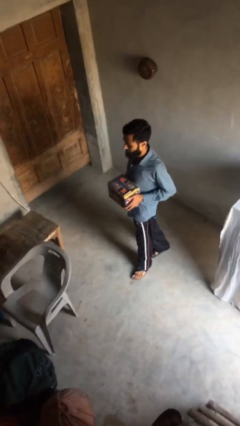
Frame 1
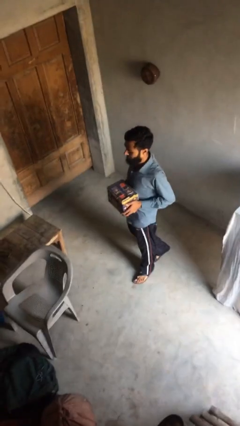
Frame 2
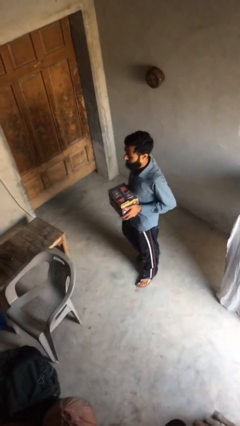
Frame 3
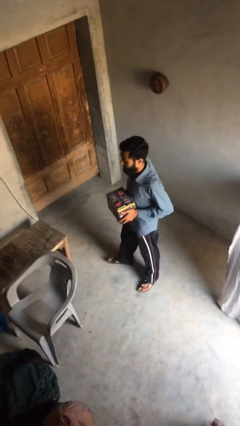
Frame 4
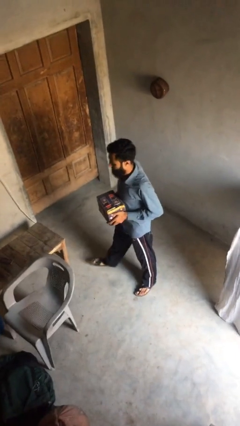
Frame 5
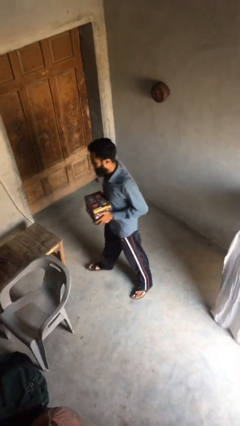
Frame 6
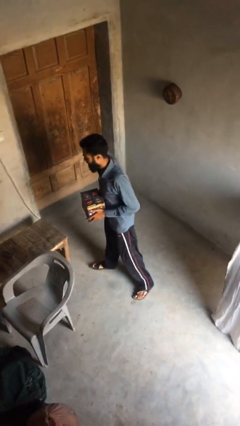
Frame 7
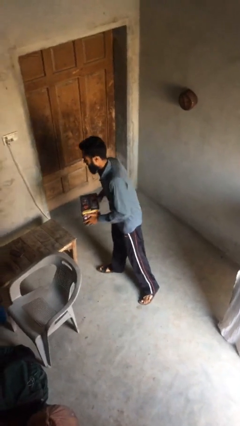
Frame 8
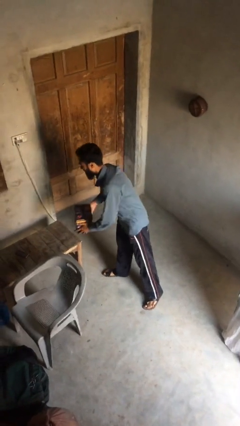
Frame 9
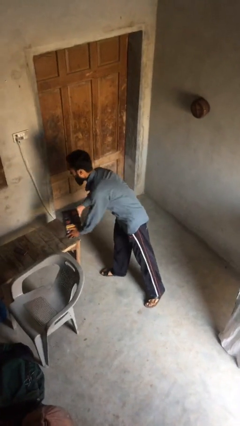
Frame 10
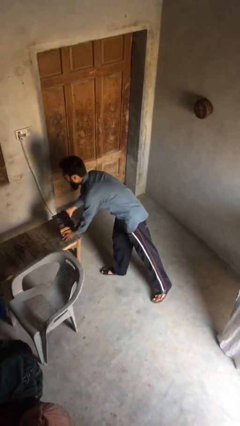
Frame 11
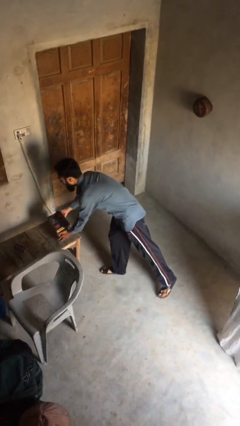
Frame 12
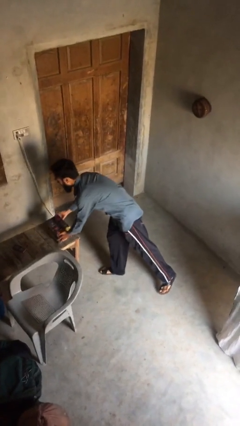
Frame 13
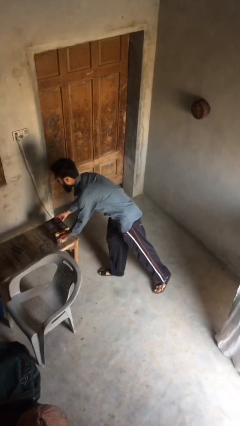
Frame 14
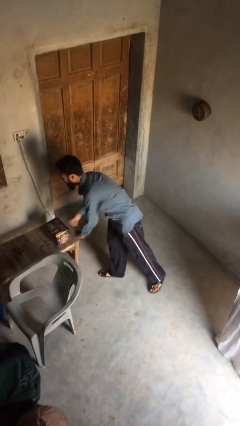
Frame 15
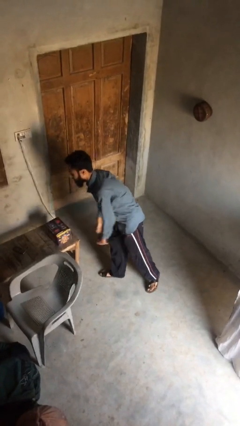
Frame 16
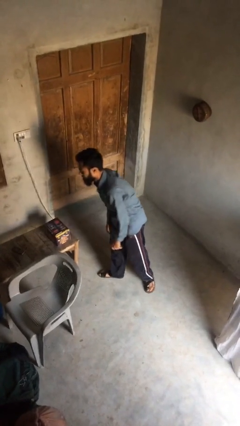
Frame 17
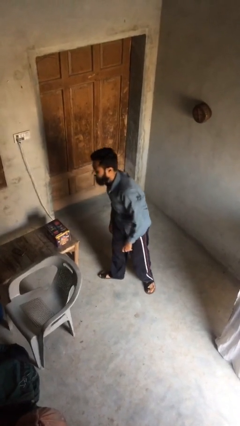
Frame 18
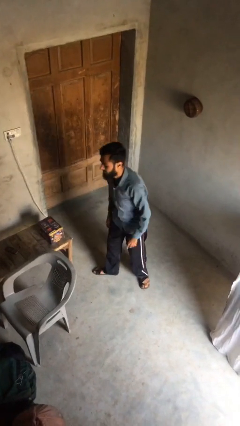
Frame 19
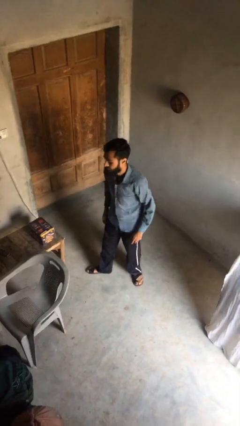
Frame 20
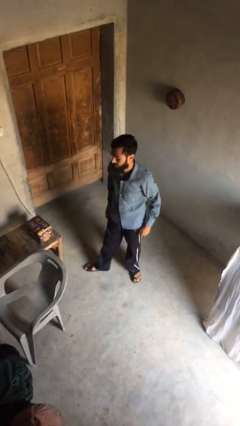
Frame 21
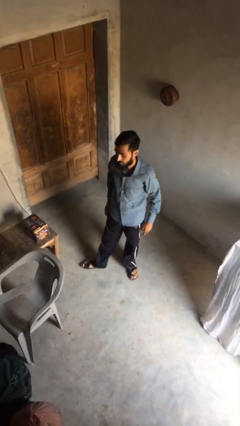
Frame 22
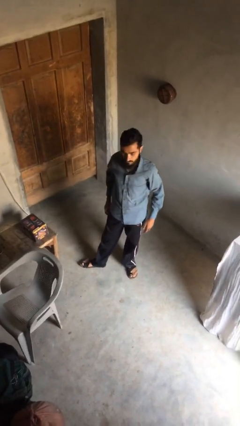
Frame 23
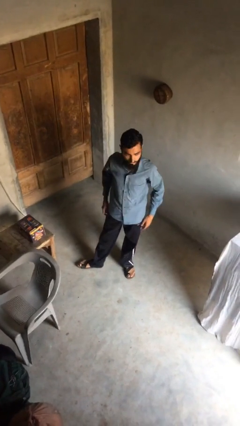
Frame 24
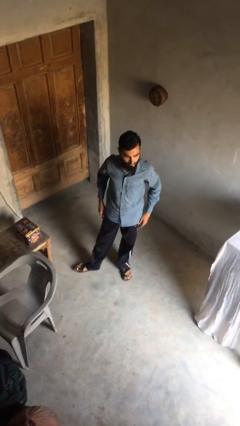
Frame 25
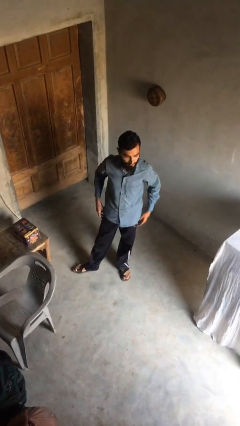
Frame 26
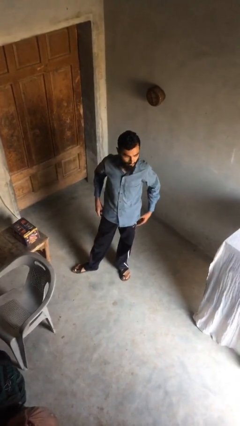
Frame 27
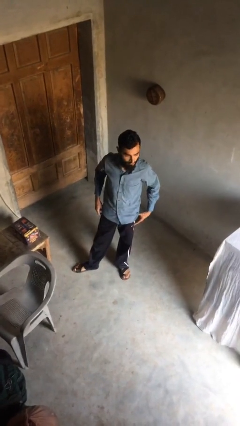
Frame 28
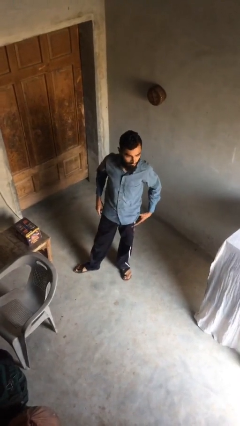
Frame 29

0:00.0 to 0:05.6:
person puts down object on table

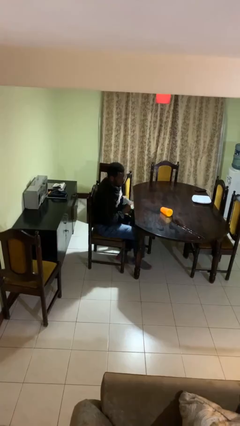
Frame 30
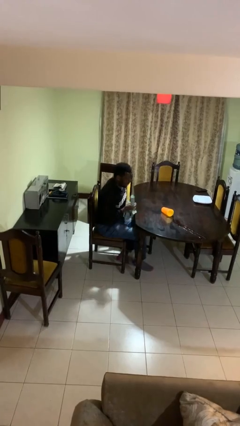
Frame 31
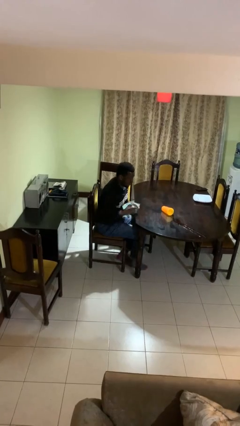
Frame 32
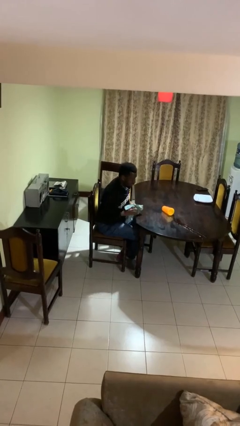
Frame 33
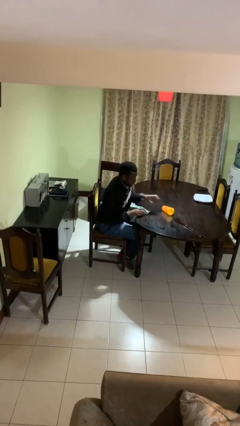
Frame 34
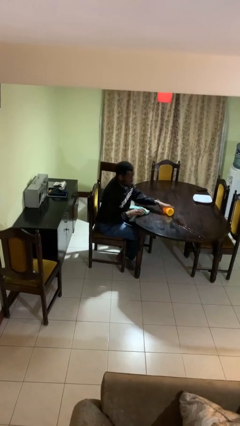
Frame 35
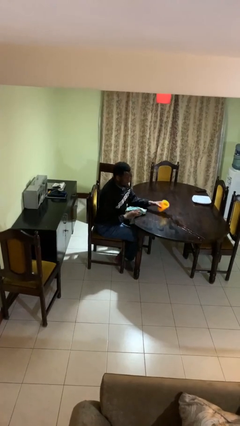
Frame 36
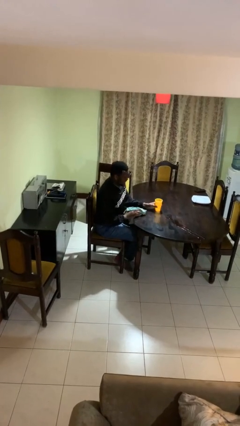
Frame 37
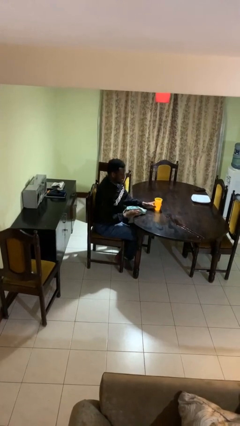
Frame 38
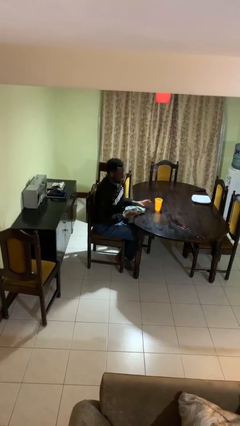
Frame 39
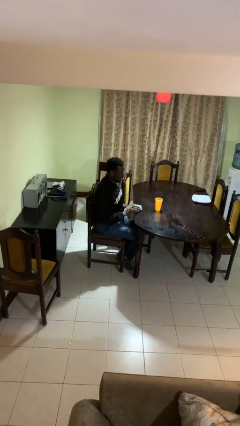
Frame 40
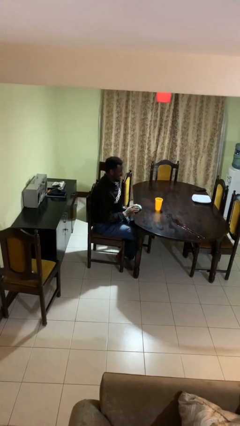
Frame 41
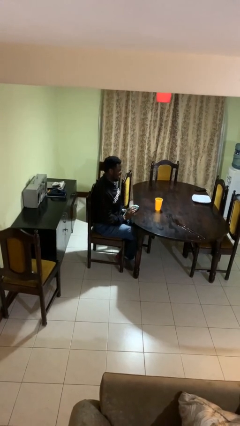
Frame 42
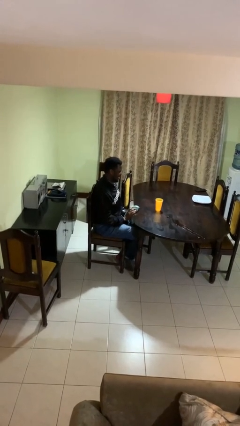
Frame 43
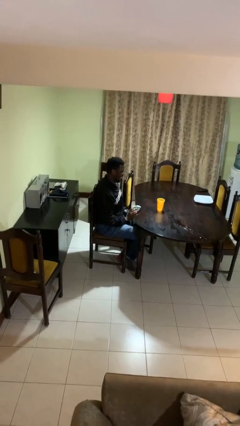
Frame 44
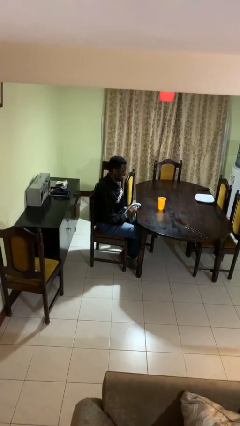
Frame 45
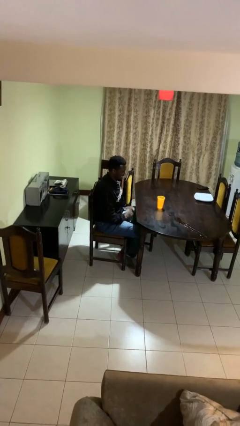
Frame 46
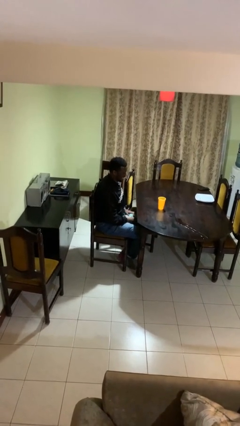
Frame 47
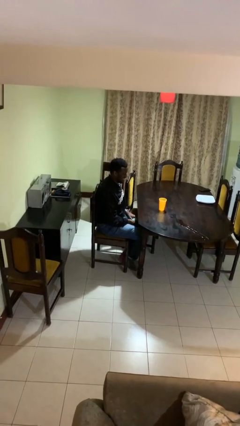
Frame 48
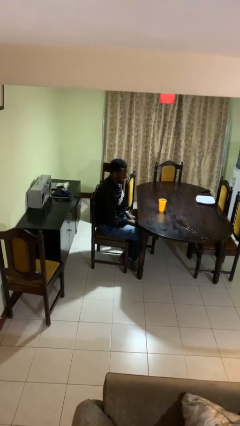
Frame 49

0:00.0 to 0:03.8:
person sets upright glass

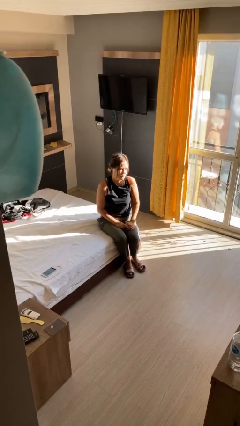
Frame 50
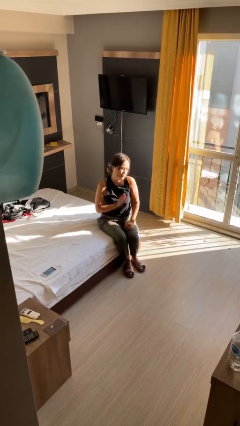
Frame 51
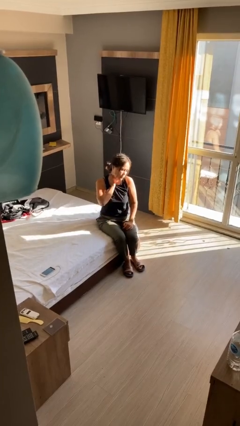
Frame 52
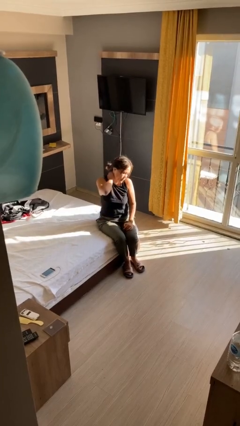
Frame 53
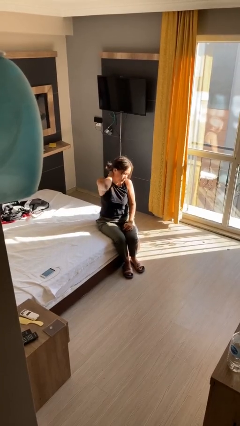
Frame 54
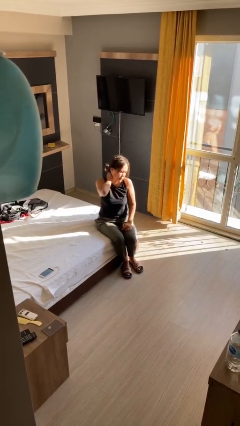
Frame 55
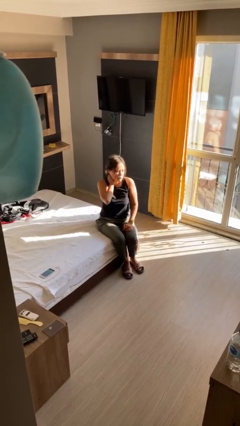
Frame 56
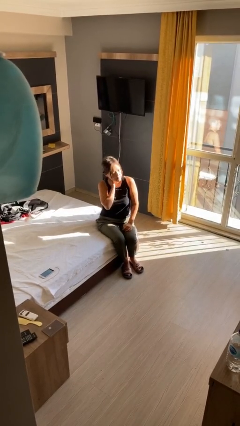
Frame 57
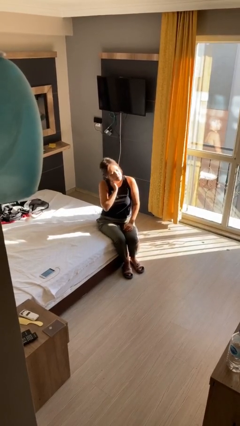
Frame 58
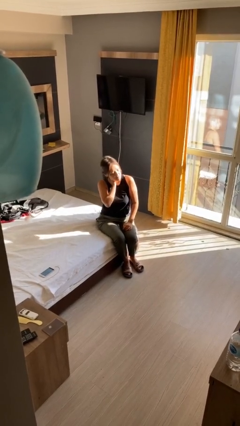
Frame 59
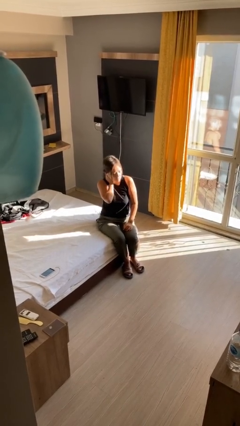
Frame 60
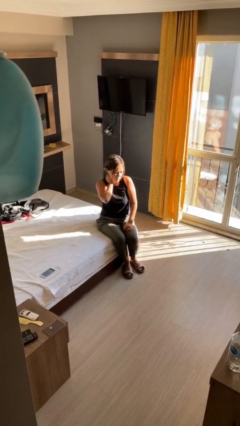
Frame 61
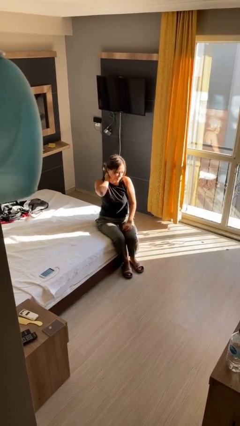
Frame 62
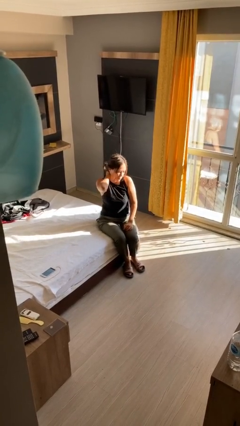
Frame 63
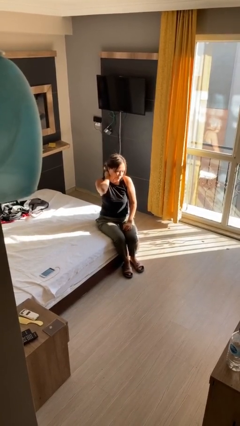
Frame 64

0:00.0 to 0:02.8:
person rubs neck

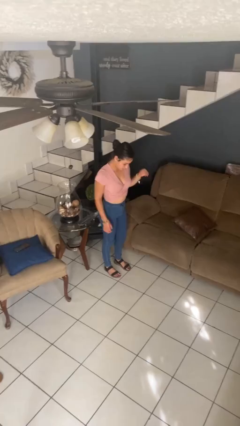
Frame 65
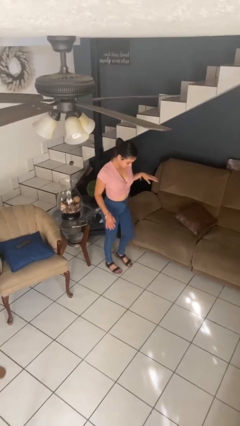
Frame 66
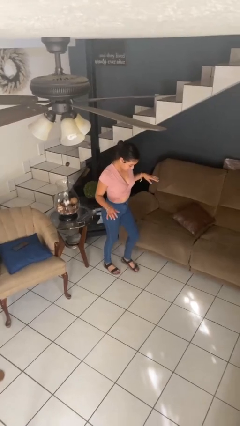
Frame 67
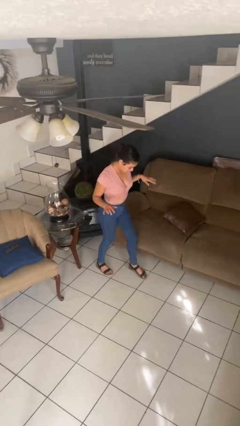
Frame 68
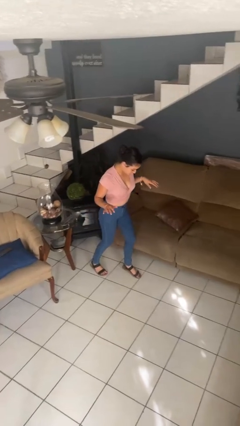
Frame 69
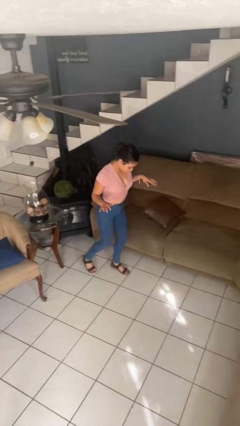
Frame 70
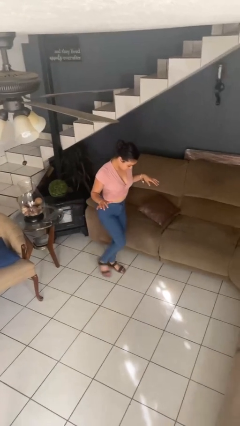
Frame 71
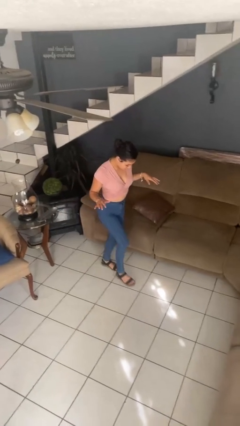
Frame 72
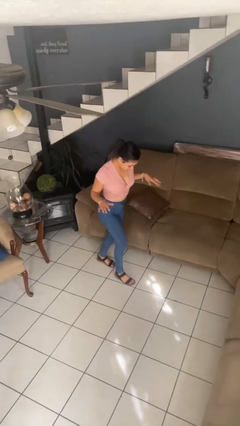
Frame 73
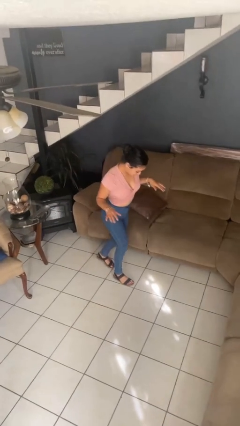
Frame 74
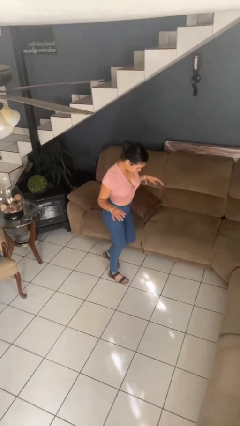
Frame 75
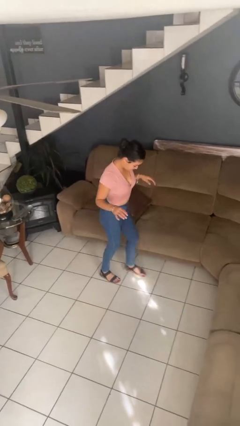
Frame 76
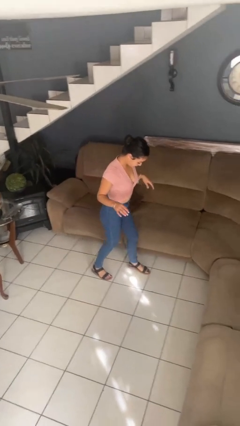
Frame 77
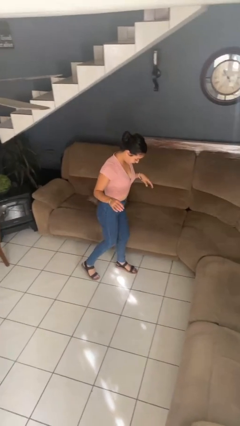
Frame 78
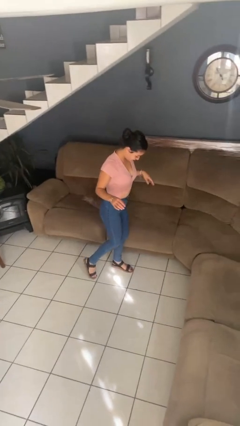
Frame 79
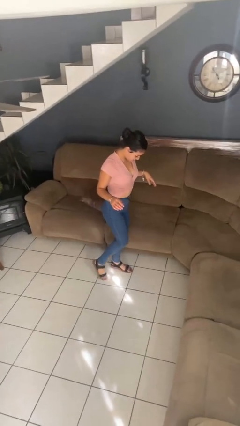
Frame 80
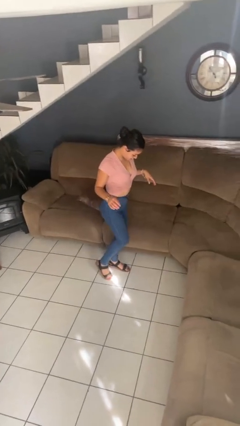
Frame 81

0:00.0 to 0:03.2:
person walks tiptoe

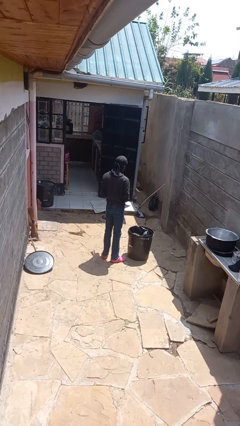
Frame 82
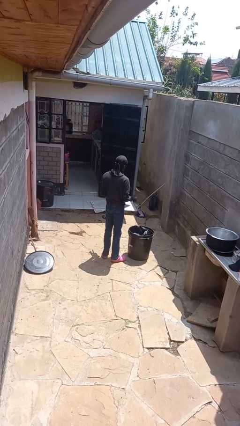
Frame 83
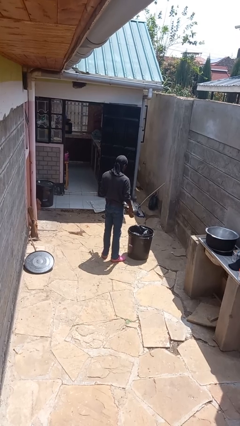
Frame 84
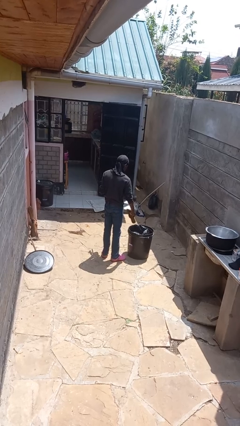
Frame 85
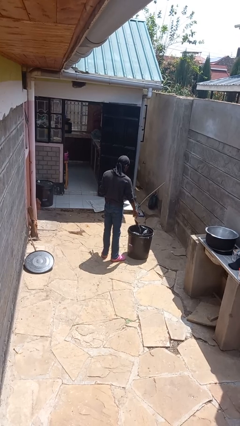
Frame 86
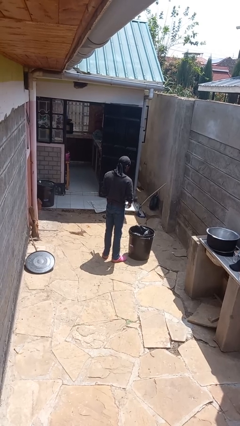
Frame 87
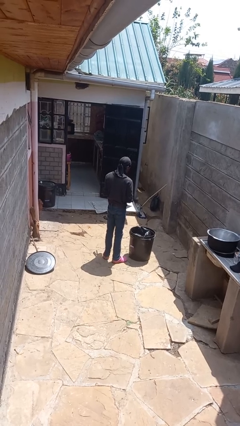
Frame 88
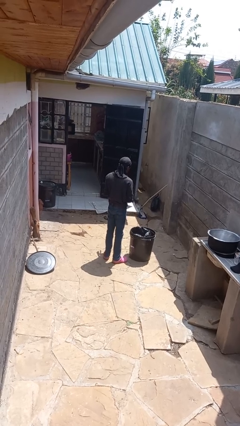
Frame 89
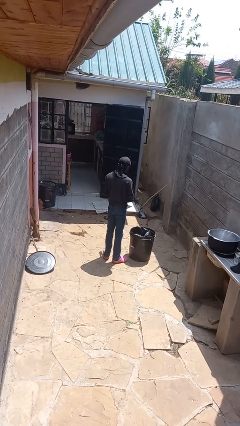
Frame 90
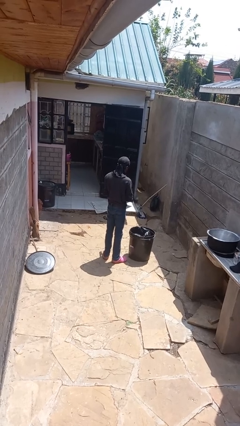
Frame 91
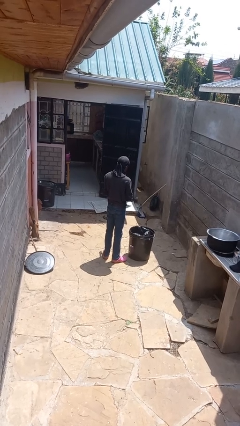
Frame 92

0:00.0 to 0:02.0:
person discards trash
